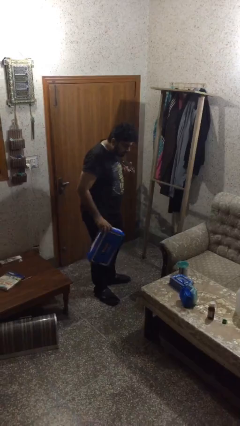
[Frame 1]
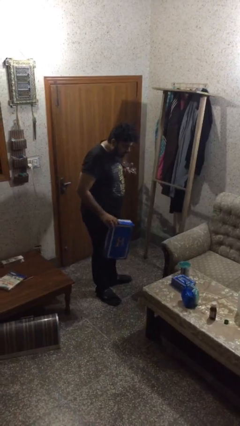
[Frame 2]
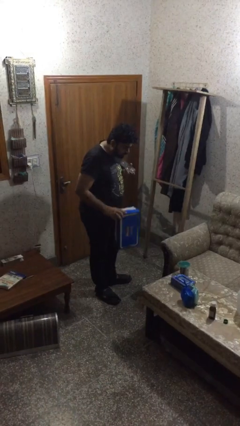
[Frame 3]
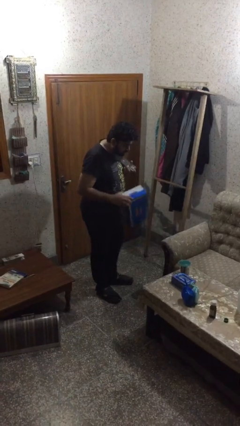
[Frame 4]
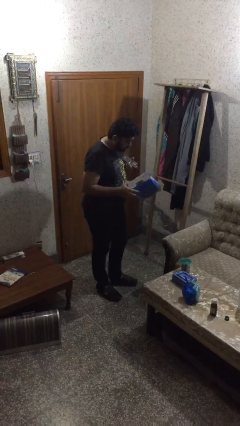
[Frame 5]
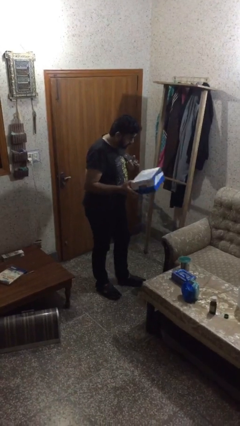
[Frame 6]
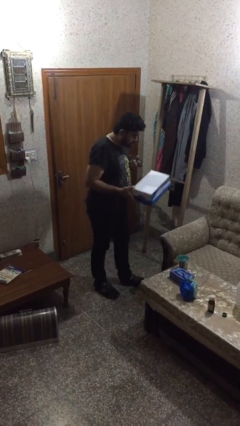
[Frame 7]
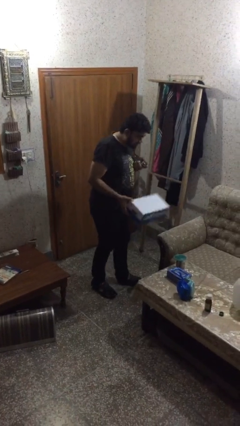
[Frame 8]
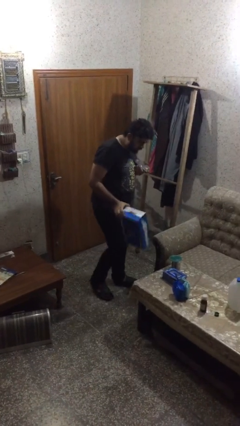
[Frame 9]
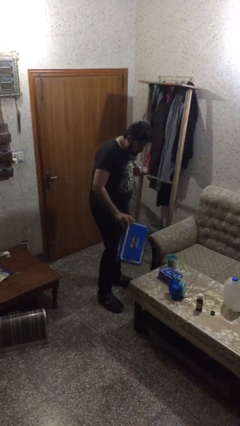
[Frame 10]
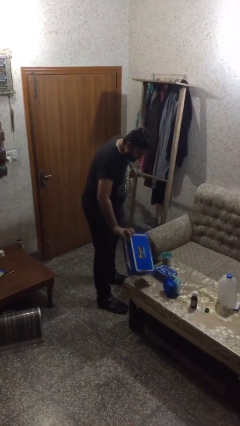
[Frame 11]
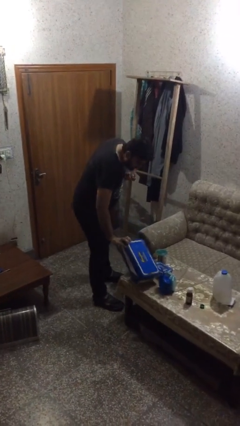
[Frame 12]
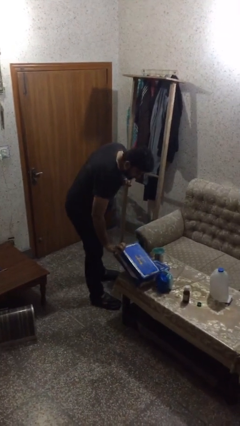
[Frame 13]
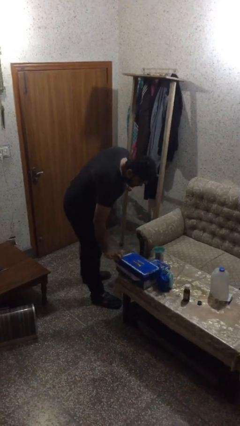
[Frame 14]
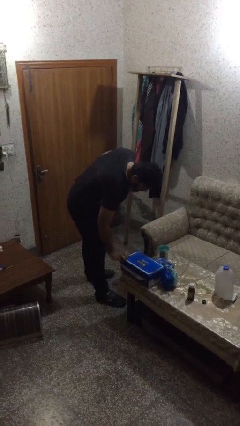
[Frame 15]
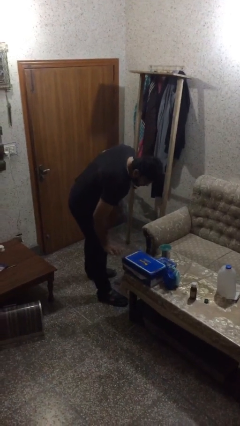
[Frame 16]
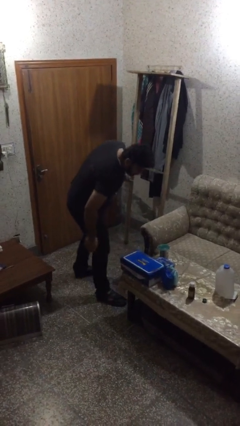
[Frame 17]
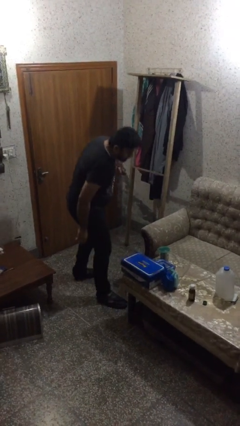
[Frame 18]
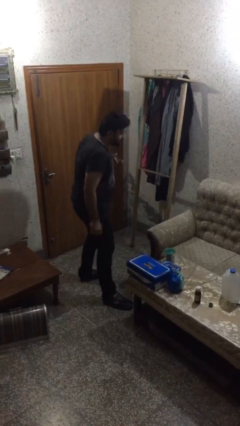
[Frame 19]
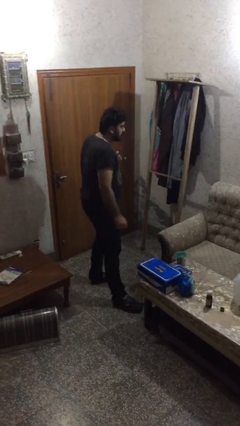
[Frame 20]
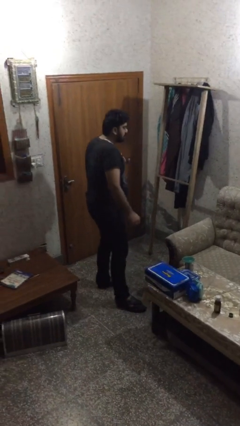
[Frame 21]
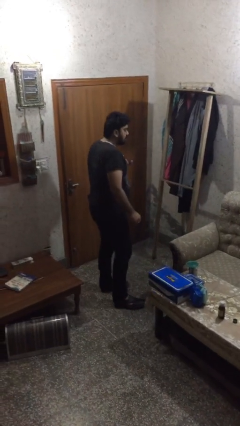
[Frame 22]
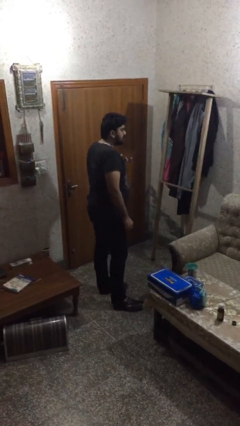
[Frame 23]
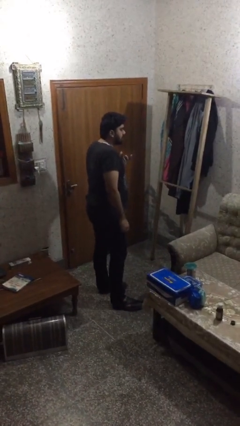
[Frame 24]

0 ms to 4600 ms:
person puts down object on table

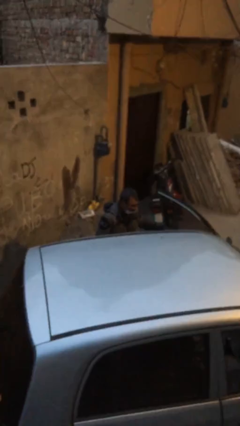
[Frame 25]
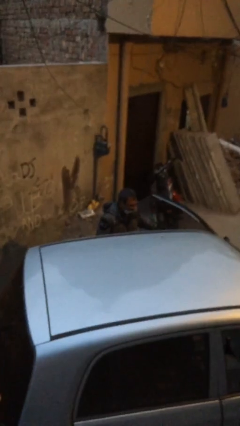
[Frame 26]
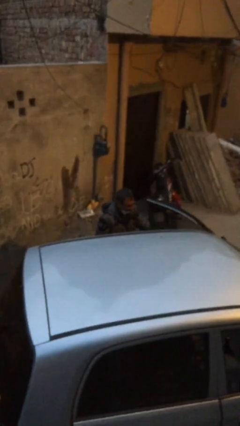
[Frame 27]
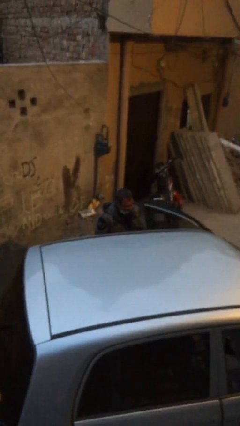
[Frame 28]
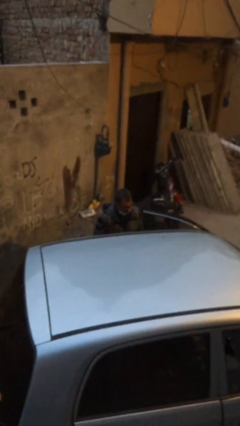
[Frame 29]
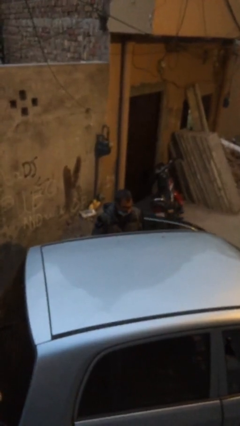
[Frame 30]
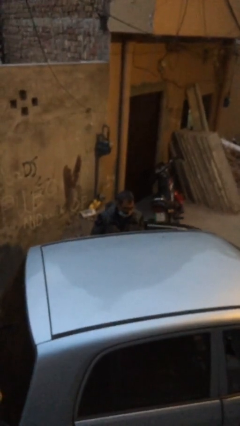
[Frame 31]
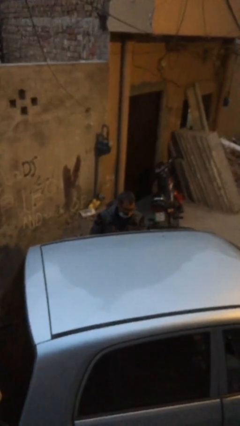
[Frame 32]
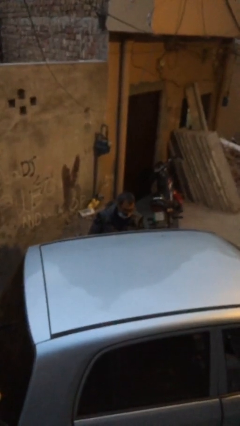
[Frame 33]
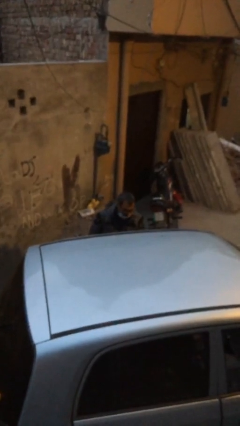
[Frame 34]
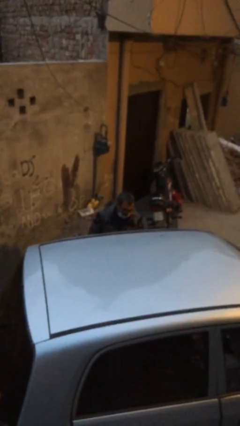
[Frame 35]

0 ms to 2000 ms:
person closes car door

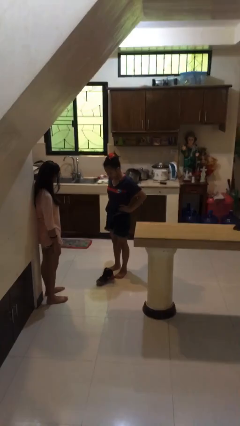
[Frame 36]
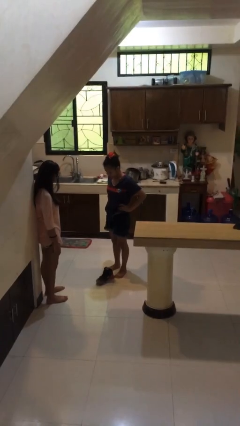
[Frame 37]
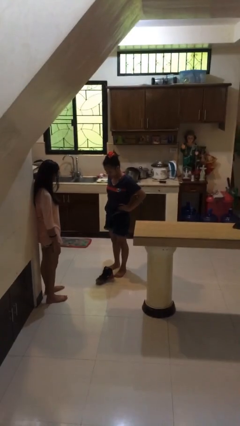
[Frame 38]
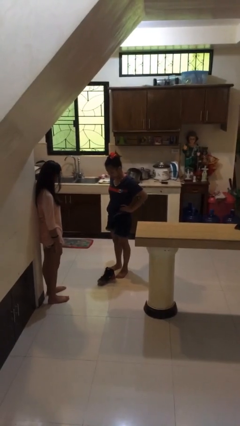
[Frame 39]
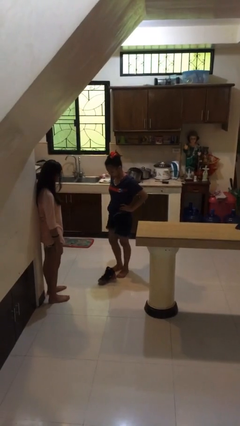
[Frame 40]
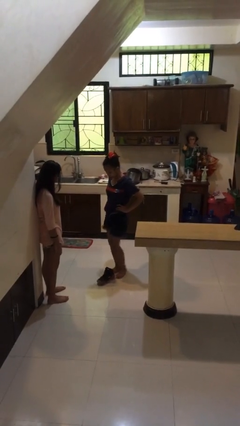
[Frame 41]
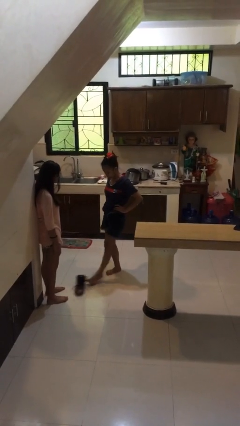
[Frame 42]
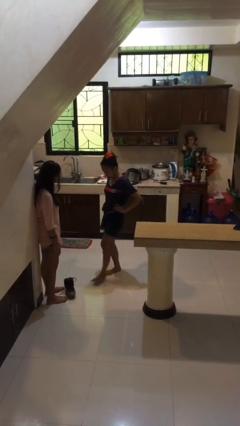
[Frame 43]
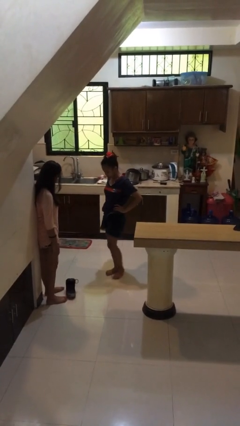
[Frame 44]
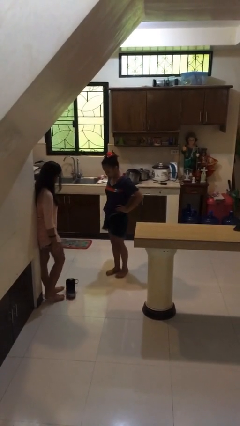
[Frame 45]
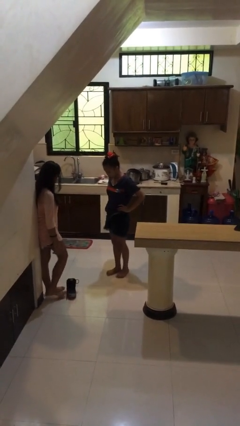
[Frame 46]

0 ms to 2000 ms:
person kicks object to person

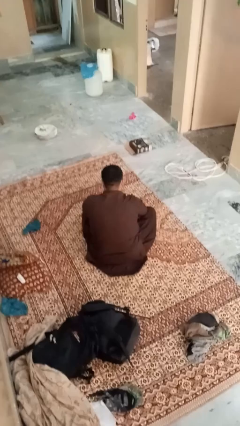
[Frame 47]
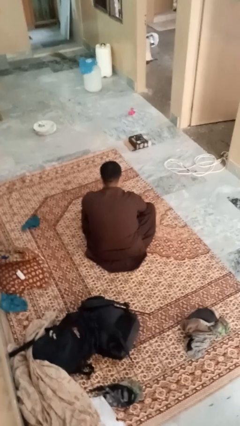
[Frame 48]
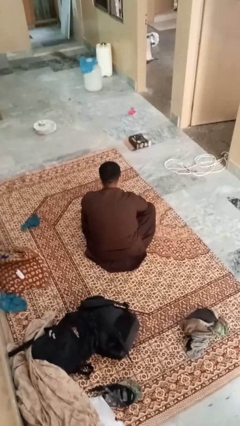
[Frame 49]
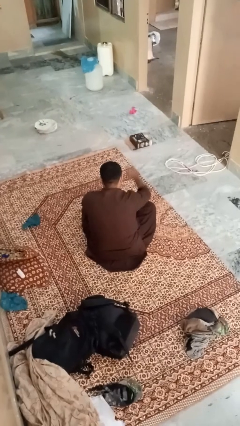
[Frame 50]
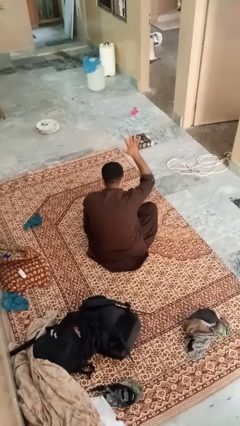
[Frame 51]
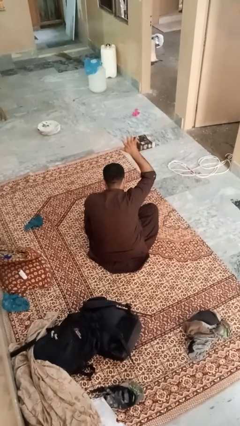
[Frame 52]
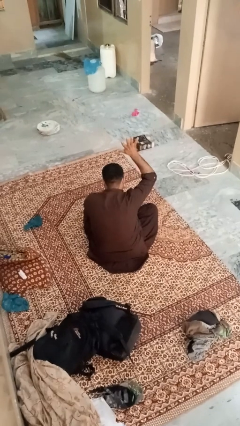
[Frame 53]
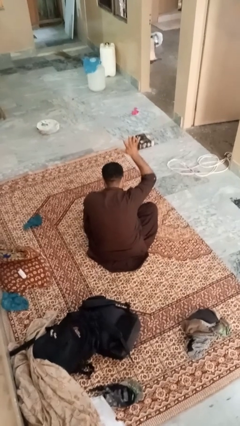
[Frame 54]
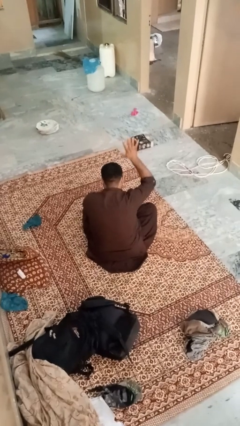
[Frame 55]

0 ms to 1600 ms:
person gestures number five

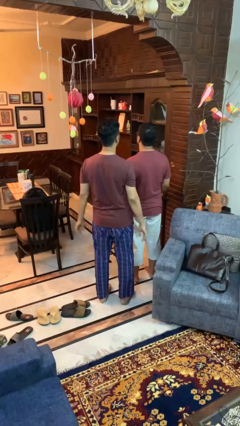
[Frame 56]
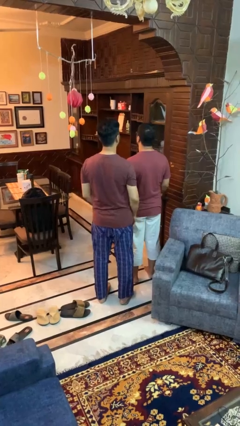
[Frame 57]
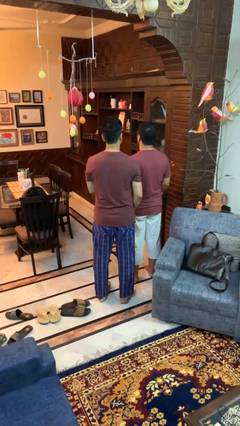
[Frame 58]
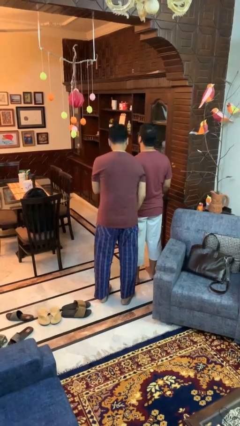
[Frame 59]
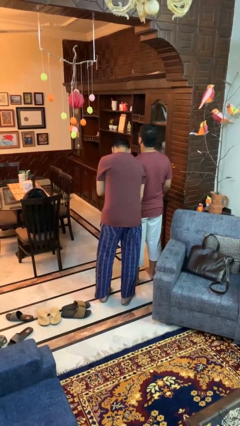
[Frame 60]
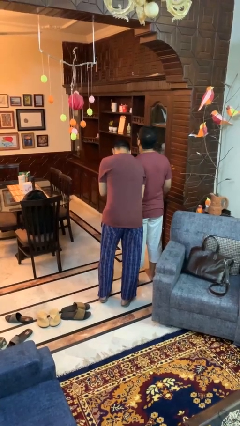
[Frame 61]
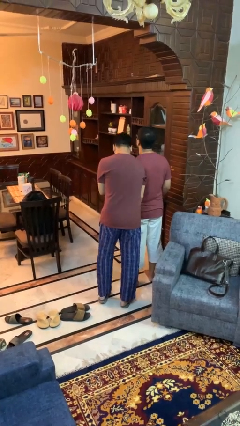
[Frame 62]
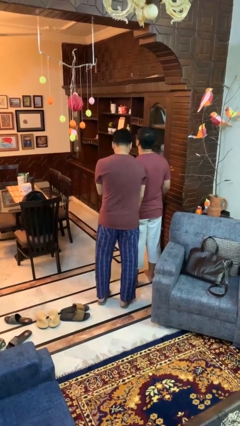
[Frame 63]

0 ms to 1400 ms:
person shoves person

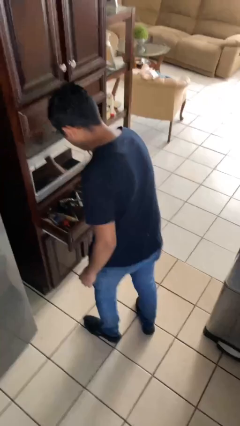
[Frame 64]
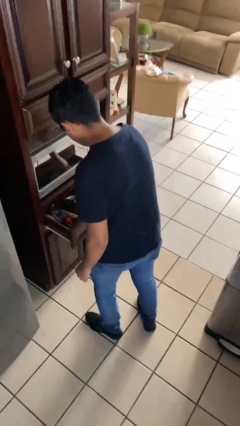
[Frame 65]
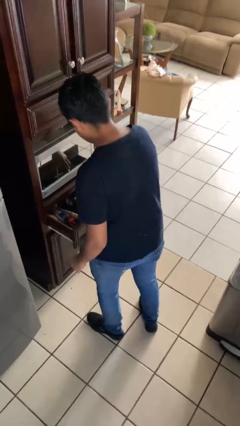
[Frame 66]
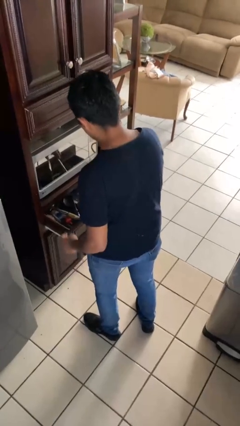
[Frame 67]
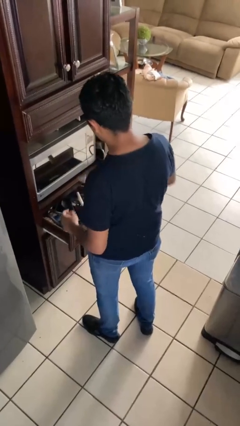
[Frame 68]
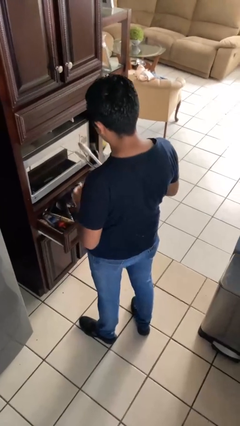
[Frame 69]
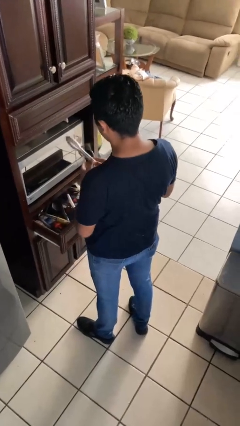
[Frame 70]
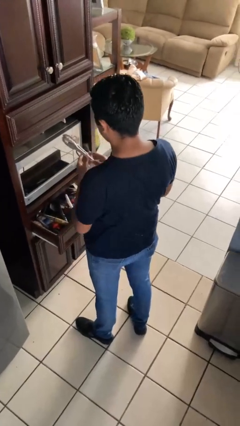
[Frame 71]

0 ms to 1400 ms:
person takes object from kitchen drawer

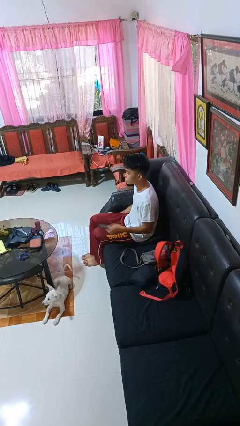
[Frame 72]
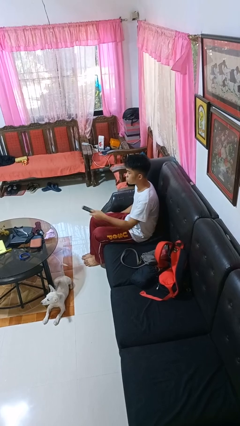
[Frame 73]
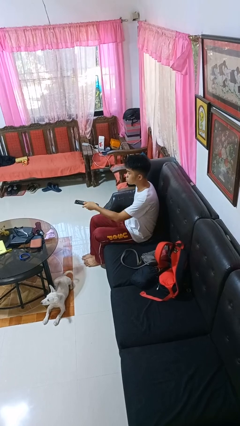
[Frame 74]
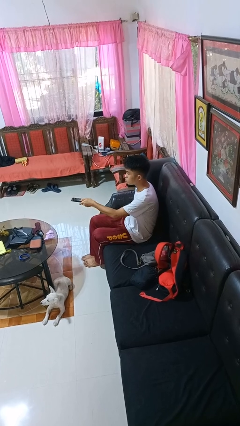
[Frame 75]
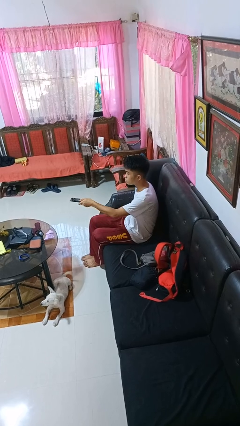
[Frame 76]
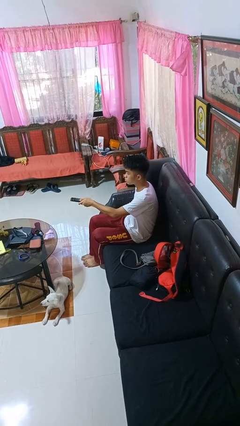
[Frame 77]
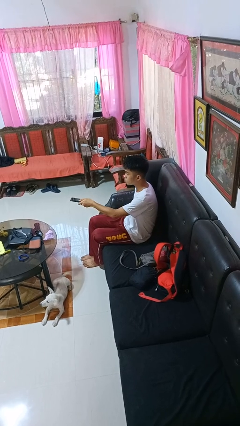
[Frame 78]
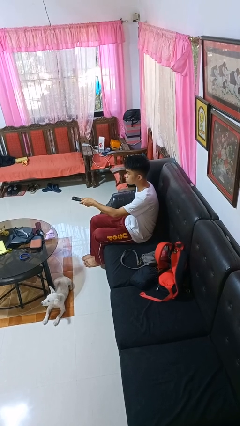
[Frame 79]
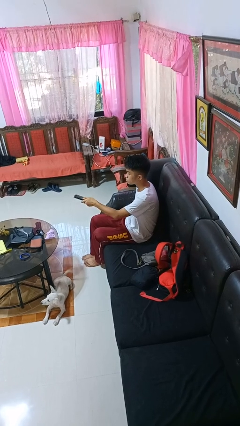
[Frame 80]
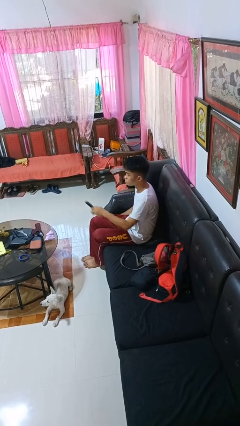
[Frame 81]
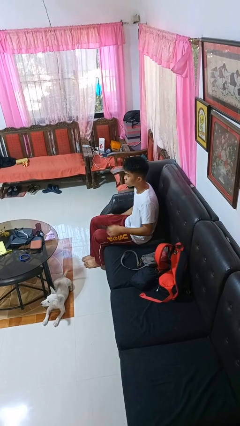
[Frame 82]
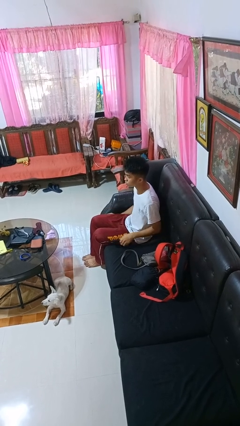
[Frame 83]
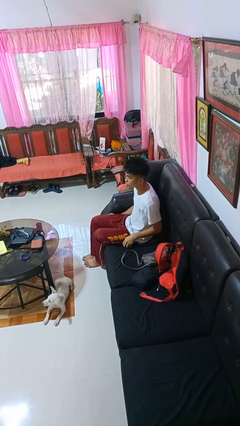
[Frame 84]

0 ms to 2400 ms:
person picks up object from shelf

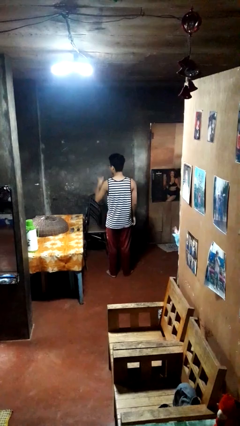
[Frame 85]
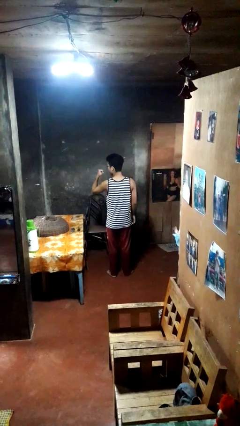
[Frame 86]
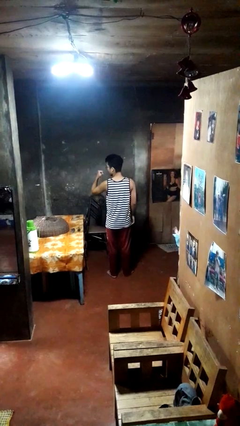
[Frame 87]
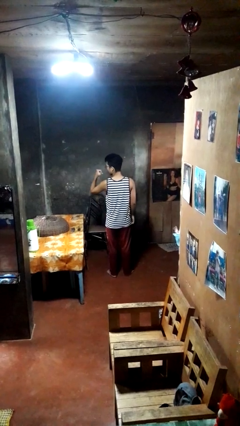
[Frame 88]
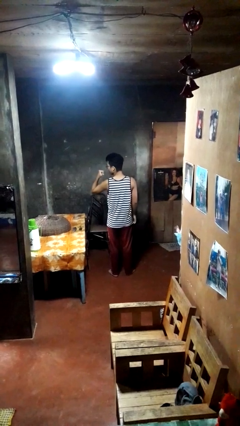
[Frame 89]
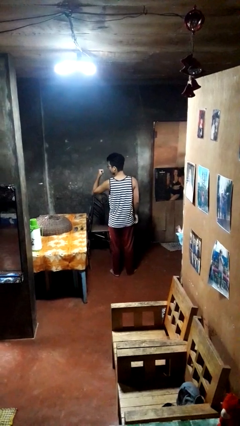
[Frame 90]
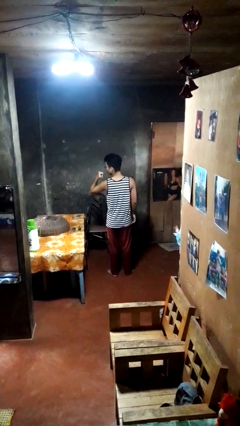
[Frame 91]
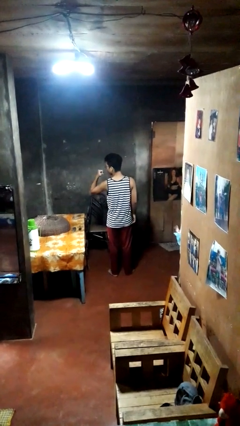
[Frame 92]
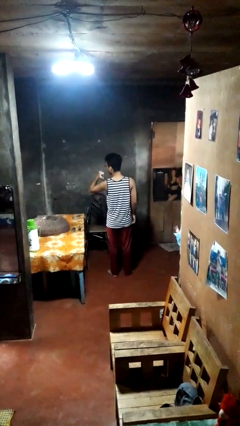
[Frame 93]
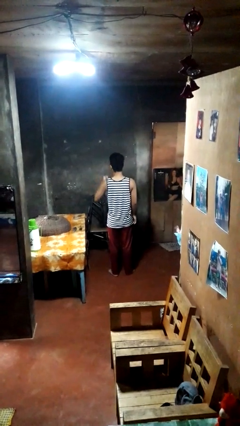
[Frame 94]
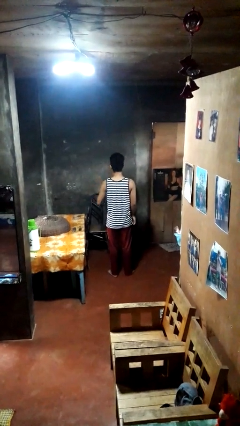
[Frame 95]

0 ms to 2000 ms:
person gestures behind me
